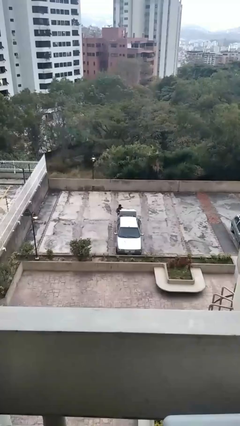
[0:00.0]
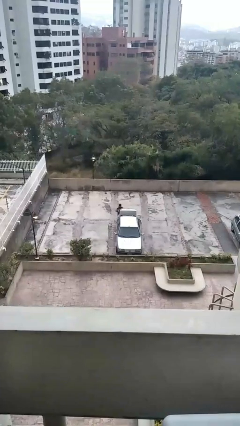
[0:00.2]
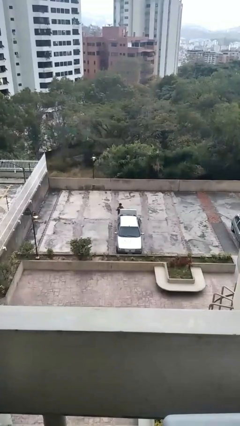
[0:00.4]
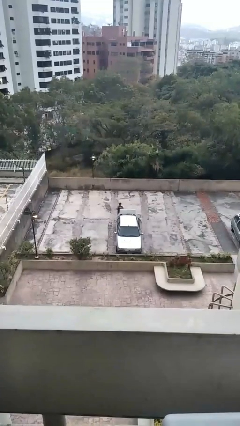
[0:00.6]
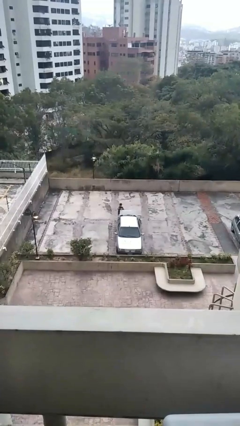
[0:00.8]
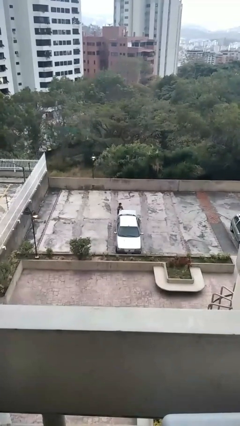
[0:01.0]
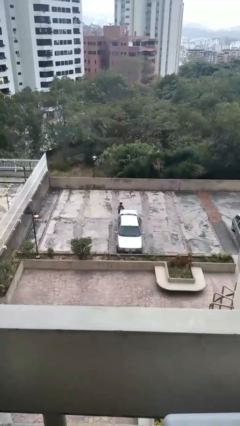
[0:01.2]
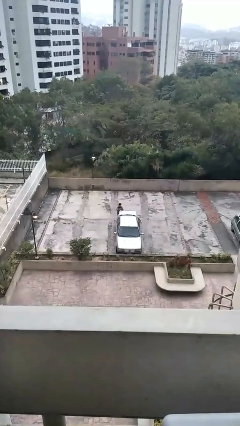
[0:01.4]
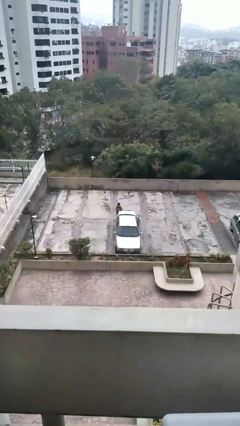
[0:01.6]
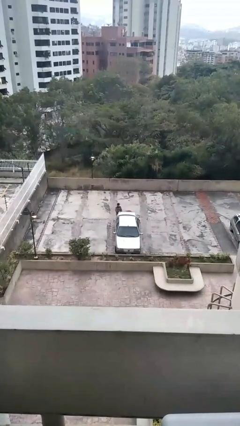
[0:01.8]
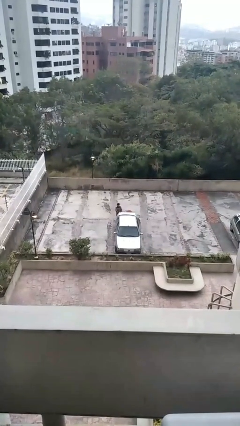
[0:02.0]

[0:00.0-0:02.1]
person closes car trunk

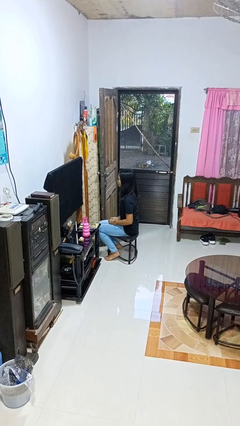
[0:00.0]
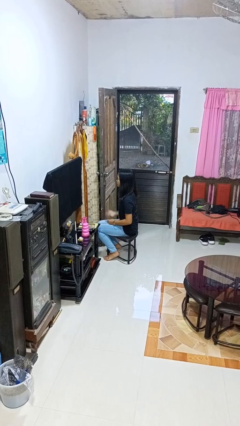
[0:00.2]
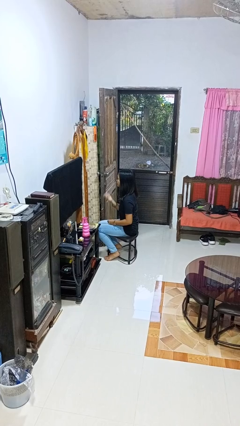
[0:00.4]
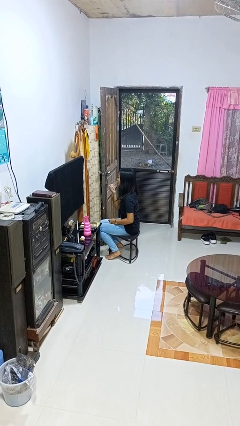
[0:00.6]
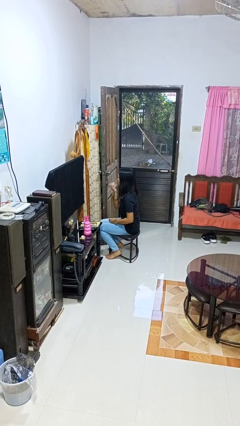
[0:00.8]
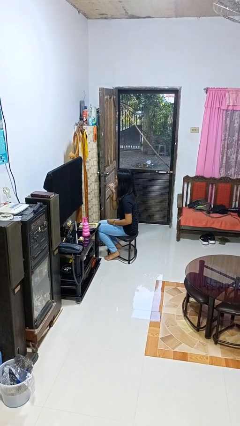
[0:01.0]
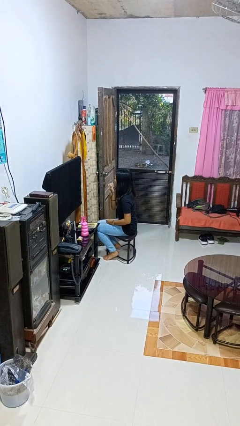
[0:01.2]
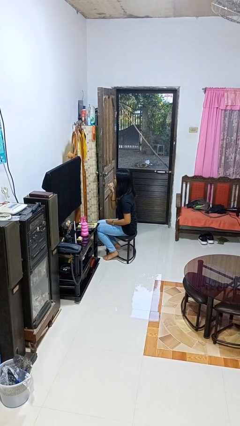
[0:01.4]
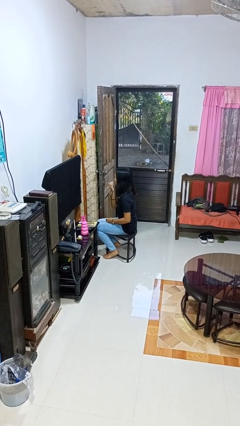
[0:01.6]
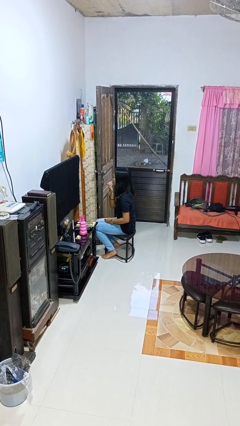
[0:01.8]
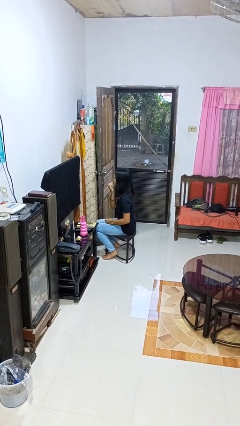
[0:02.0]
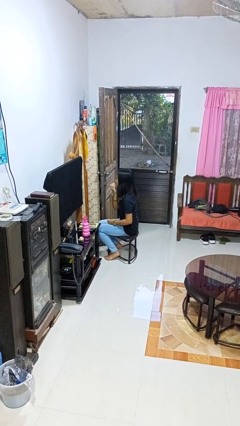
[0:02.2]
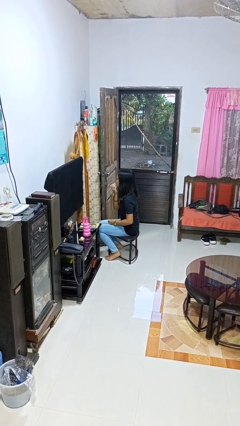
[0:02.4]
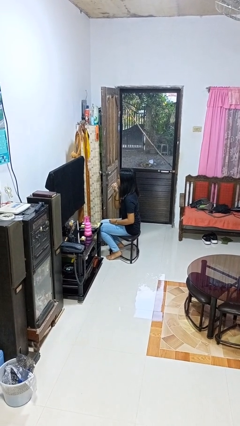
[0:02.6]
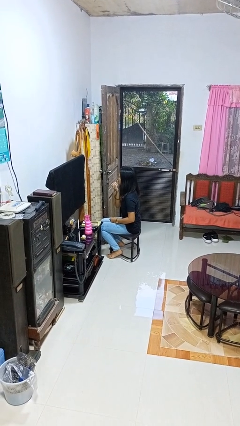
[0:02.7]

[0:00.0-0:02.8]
person applies lip makeup

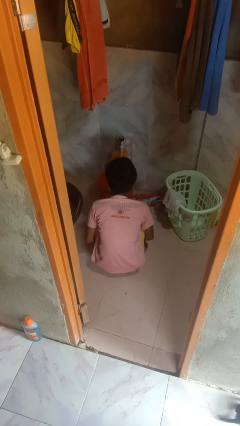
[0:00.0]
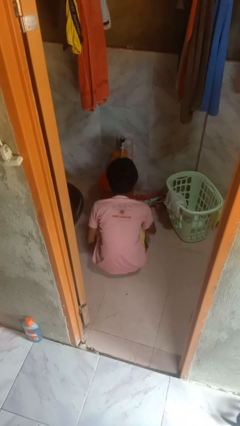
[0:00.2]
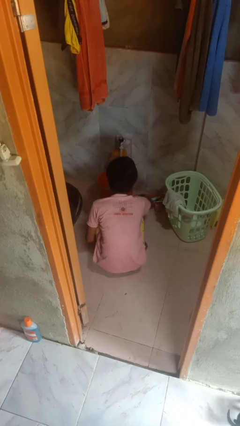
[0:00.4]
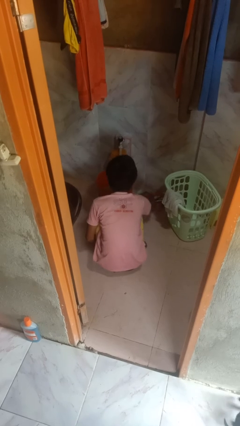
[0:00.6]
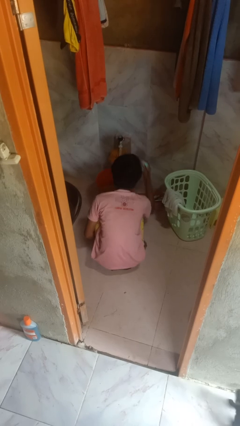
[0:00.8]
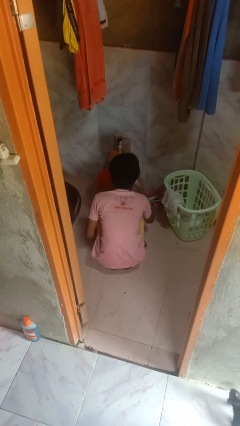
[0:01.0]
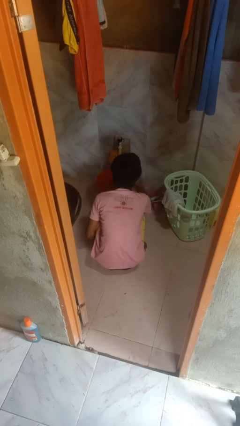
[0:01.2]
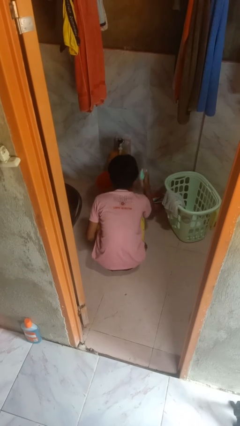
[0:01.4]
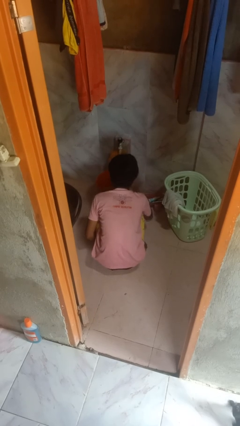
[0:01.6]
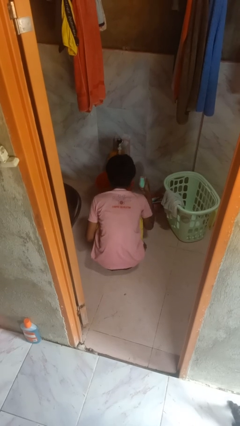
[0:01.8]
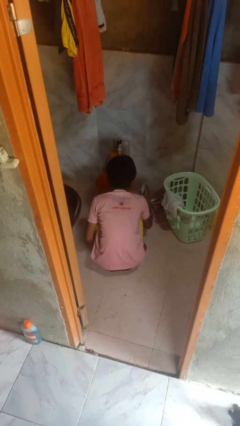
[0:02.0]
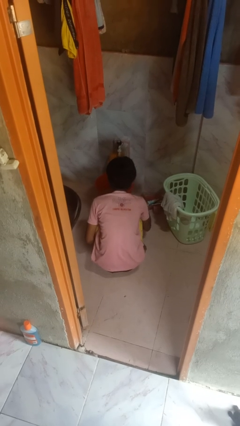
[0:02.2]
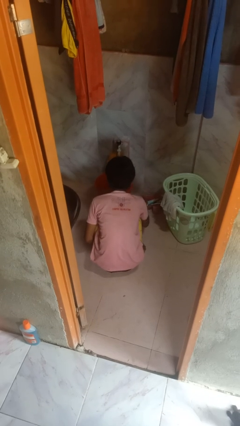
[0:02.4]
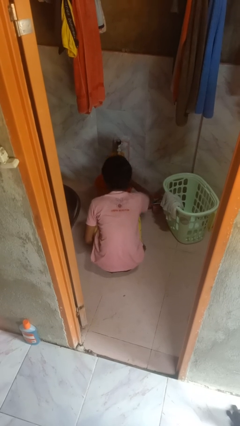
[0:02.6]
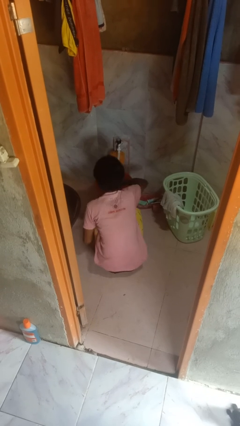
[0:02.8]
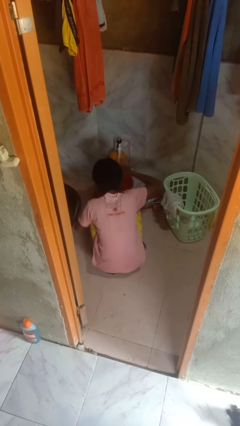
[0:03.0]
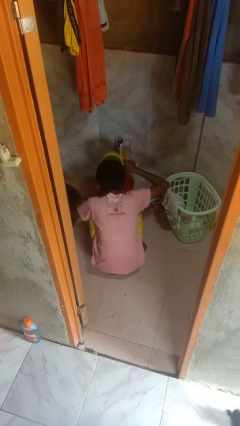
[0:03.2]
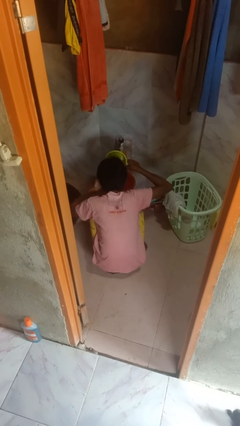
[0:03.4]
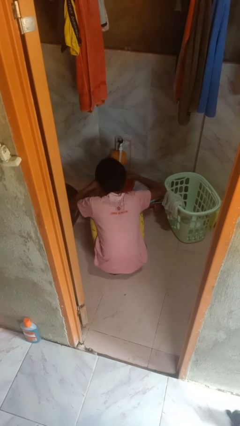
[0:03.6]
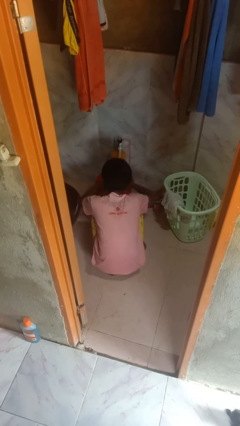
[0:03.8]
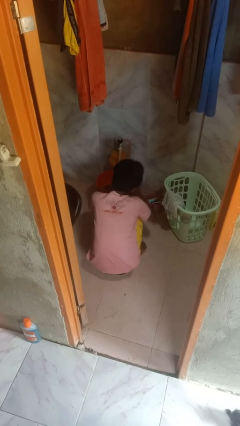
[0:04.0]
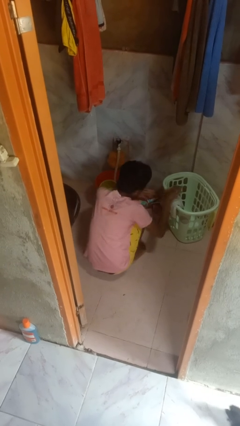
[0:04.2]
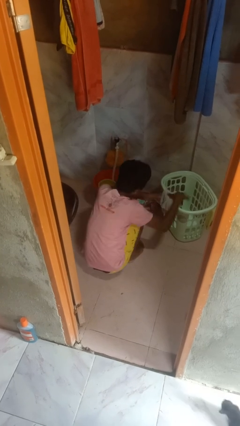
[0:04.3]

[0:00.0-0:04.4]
person washes face

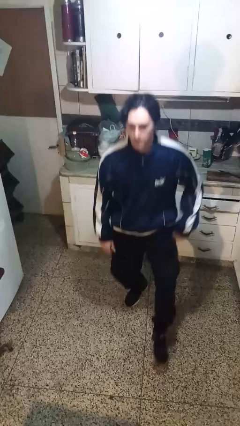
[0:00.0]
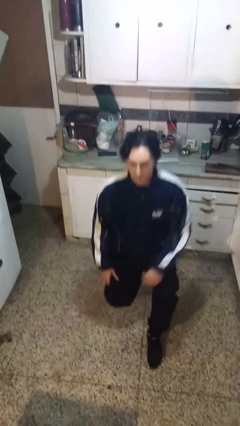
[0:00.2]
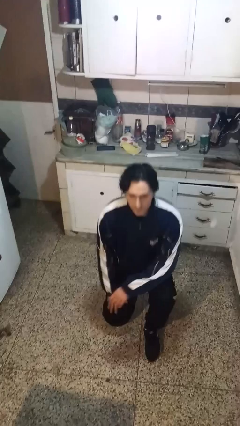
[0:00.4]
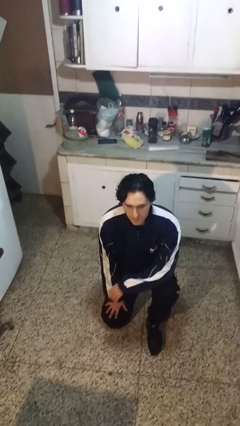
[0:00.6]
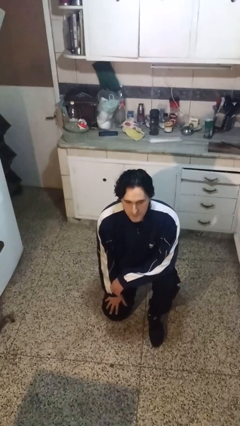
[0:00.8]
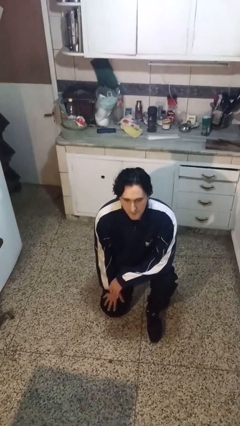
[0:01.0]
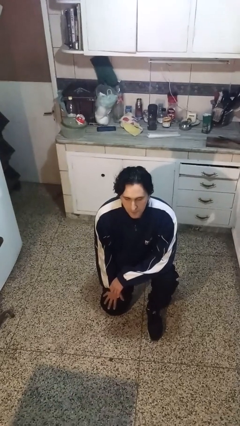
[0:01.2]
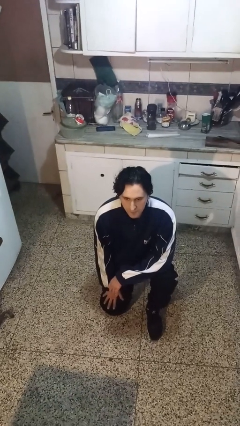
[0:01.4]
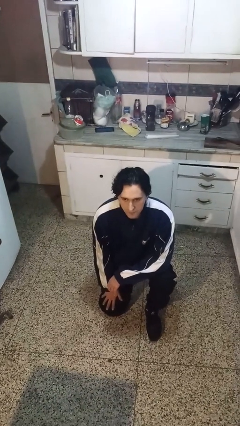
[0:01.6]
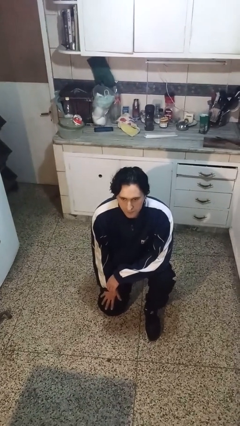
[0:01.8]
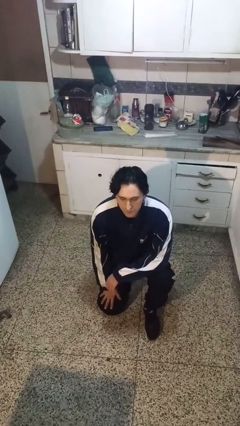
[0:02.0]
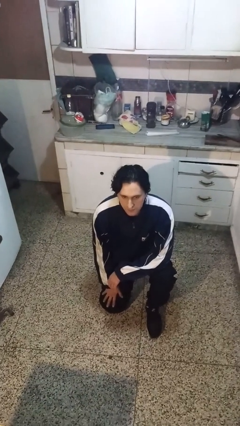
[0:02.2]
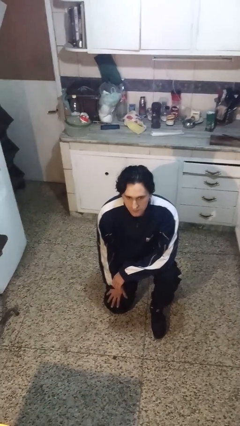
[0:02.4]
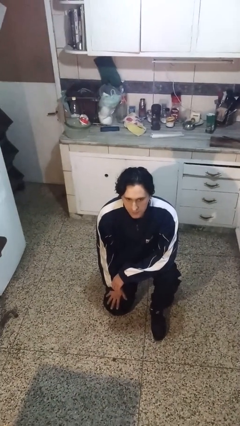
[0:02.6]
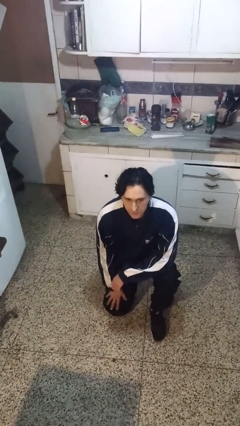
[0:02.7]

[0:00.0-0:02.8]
person kneels

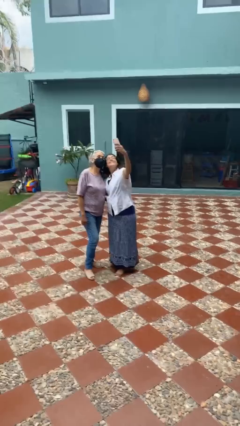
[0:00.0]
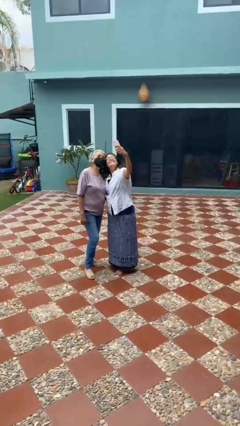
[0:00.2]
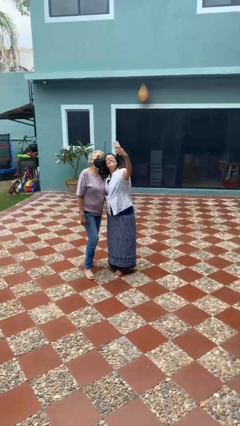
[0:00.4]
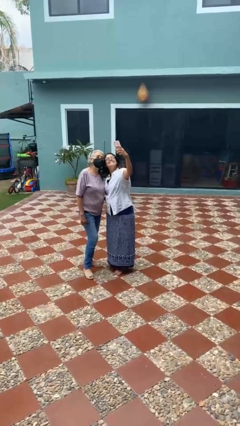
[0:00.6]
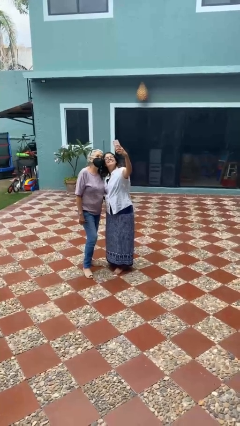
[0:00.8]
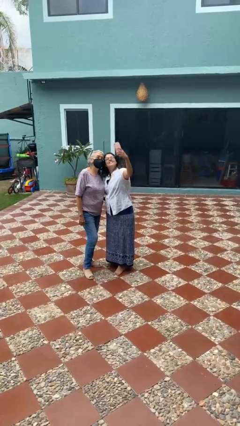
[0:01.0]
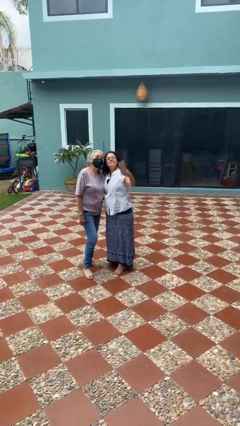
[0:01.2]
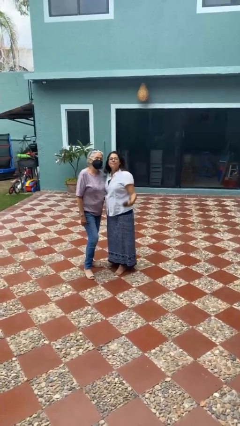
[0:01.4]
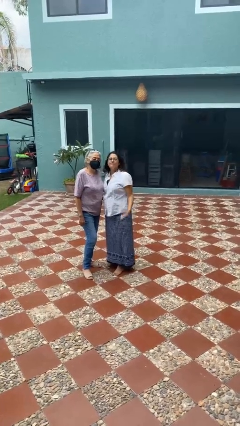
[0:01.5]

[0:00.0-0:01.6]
person takes selfie with person

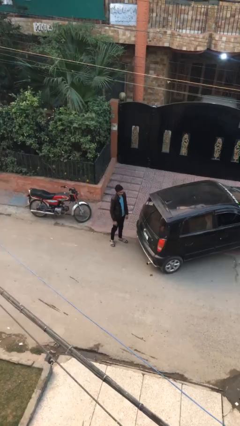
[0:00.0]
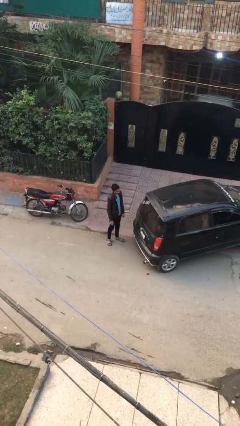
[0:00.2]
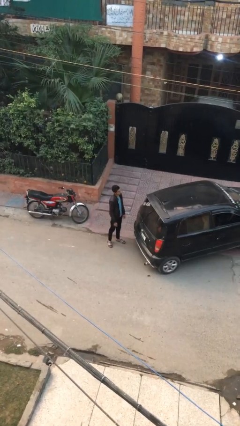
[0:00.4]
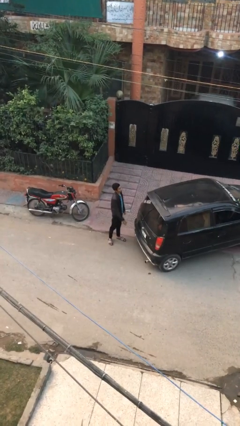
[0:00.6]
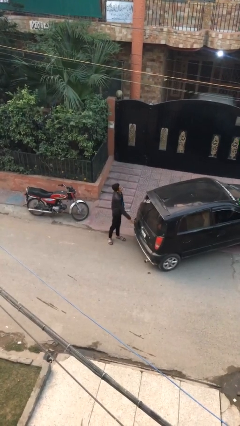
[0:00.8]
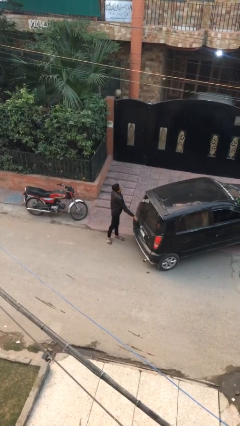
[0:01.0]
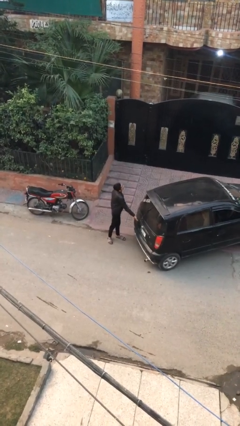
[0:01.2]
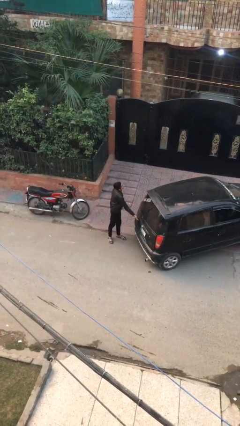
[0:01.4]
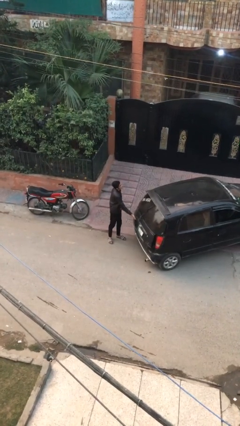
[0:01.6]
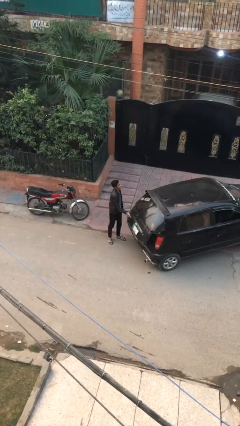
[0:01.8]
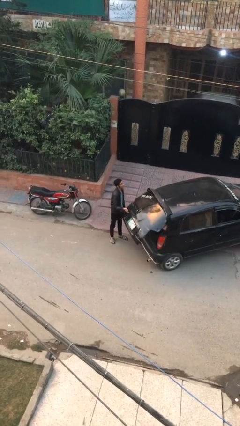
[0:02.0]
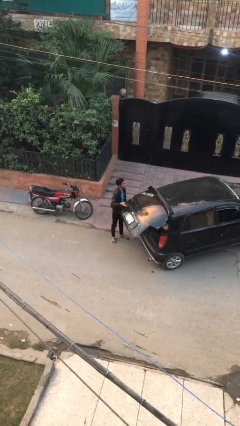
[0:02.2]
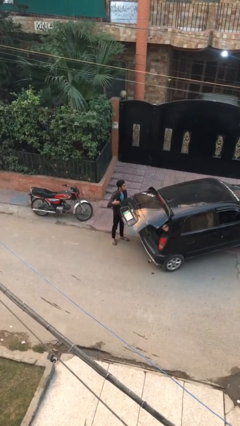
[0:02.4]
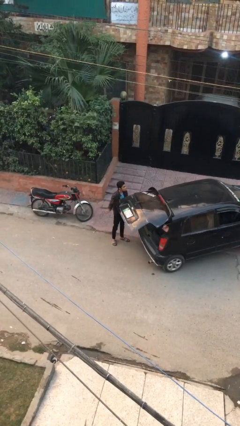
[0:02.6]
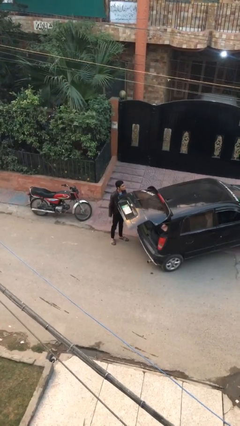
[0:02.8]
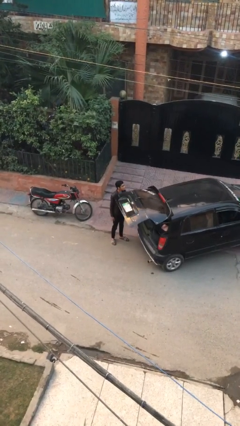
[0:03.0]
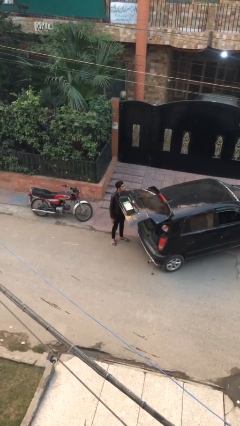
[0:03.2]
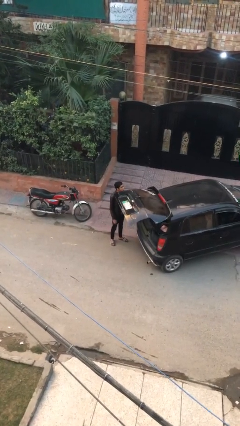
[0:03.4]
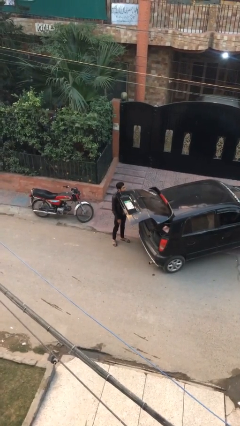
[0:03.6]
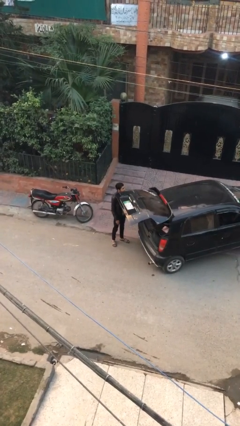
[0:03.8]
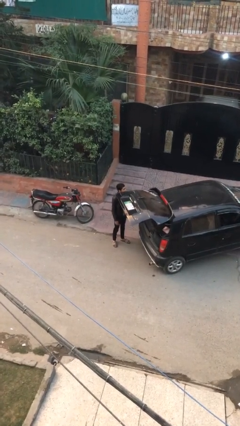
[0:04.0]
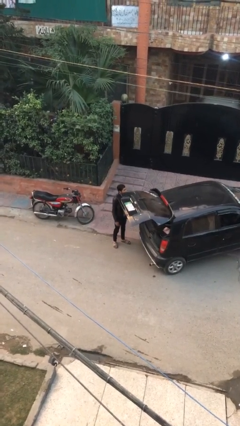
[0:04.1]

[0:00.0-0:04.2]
person opens car trunk
